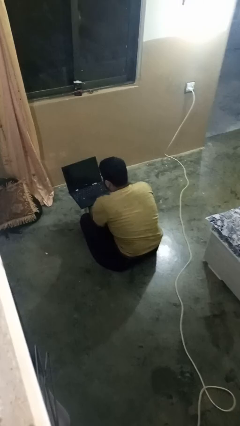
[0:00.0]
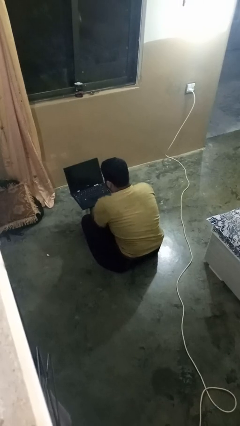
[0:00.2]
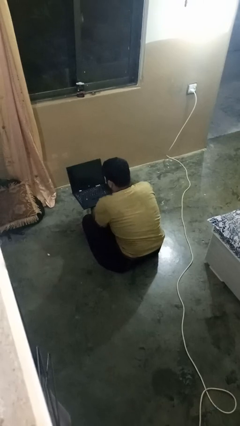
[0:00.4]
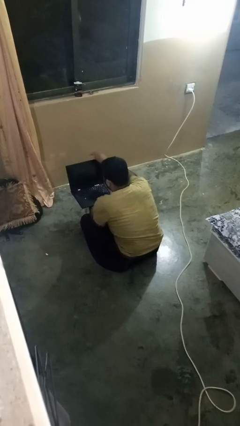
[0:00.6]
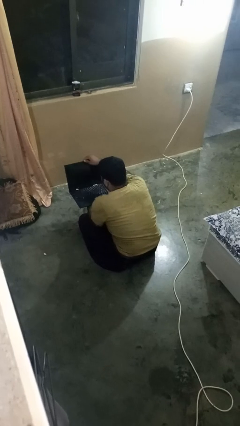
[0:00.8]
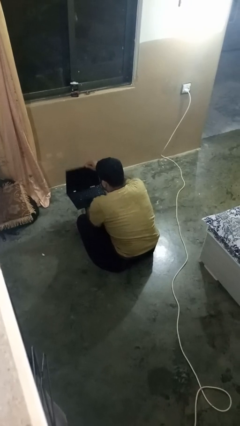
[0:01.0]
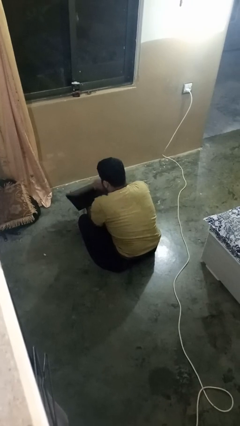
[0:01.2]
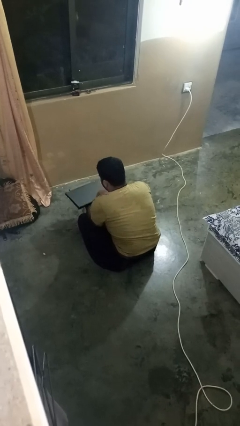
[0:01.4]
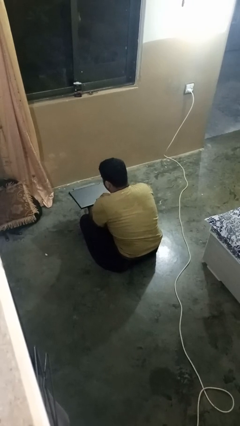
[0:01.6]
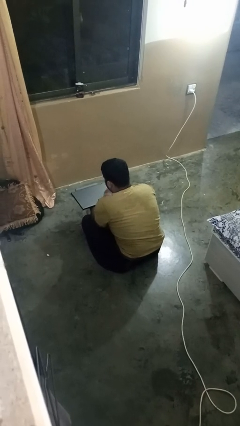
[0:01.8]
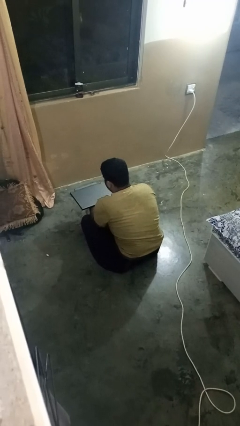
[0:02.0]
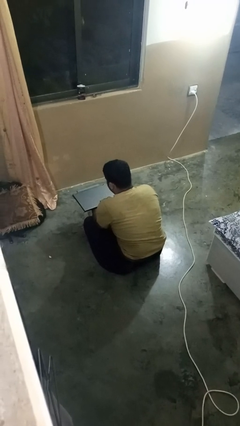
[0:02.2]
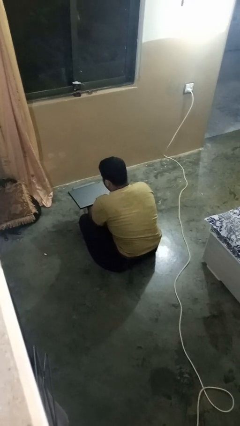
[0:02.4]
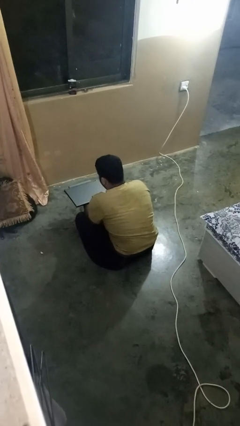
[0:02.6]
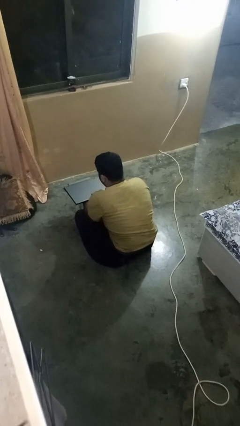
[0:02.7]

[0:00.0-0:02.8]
person closes laptop

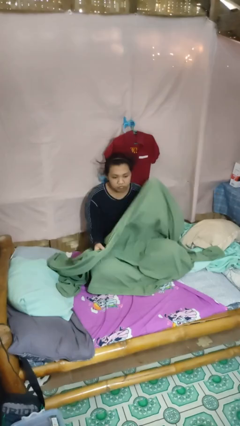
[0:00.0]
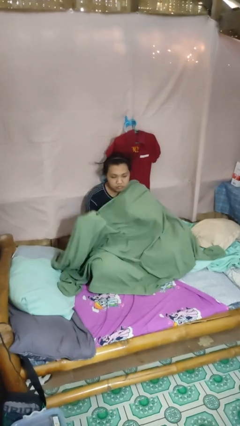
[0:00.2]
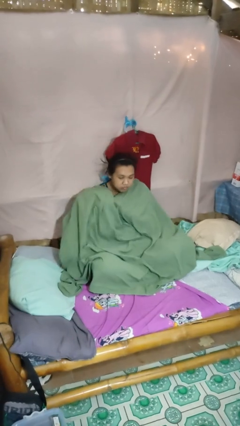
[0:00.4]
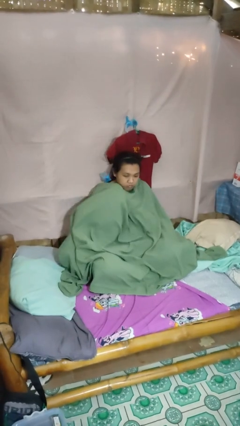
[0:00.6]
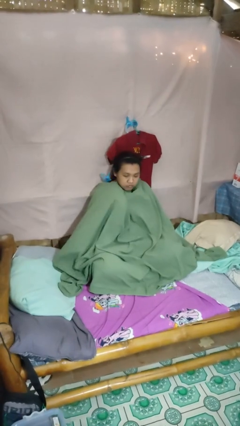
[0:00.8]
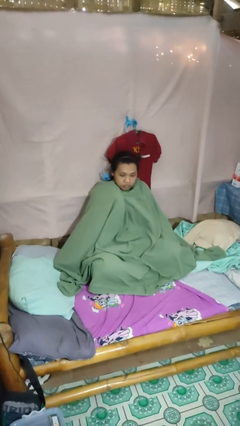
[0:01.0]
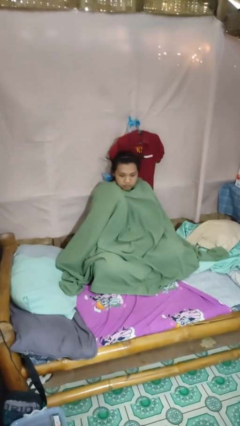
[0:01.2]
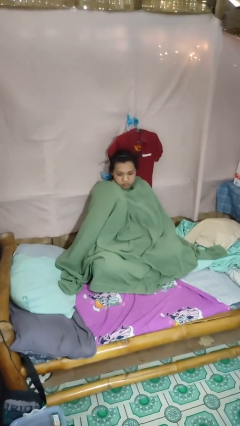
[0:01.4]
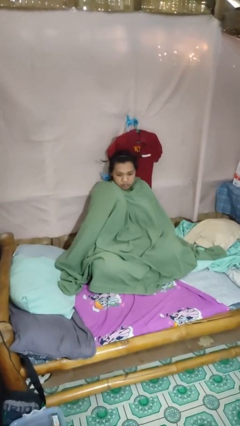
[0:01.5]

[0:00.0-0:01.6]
person covers with blanket

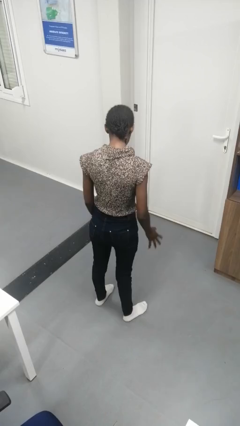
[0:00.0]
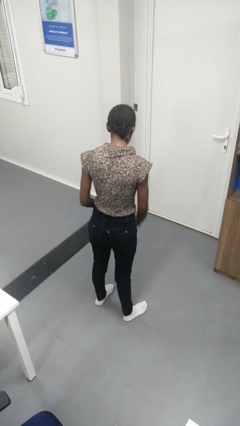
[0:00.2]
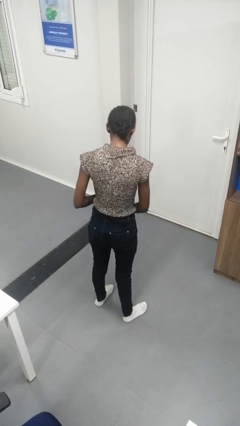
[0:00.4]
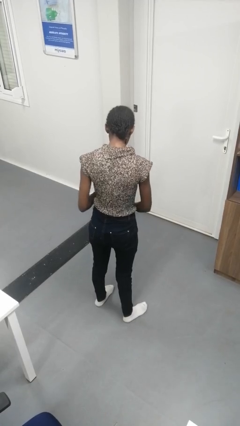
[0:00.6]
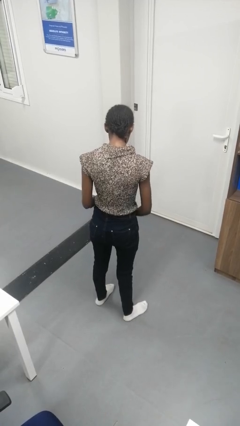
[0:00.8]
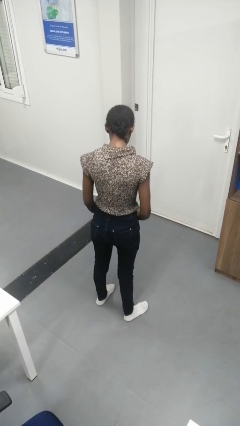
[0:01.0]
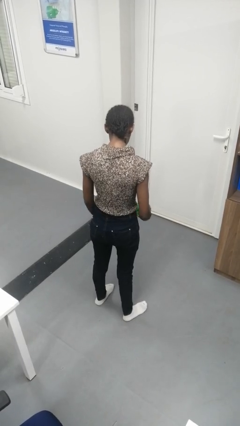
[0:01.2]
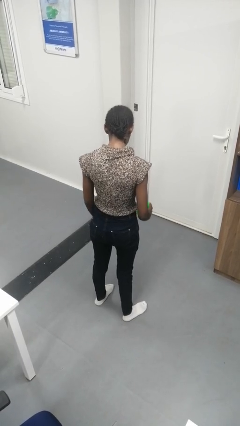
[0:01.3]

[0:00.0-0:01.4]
person bounces ball on floor

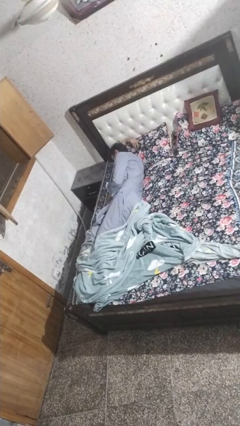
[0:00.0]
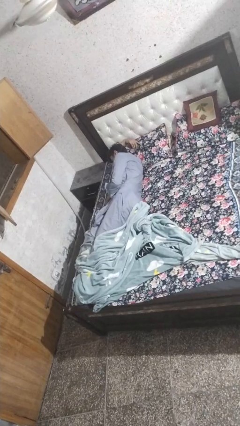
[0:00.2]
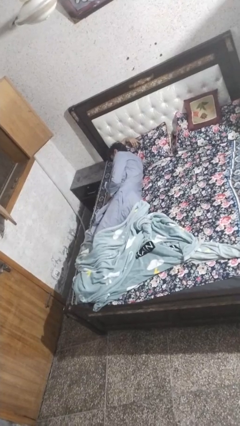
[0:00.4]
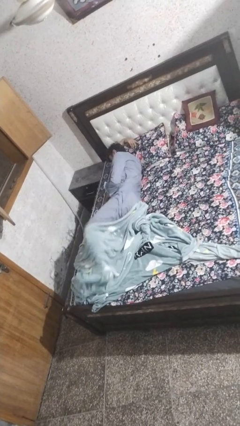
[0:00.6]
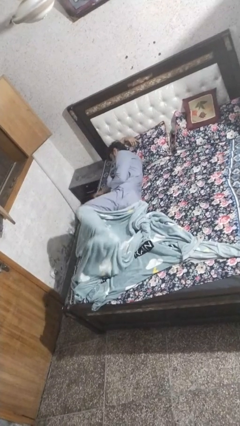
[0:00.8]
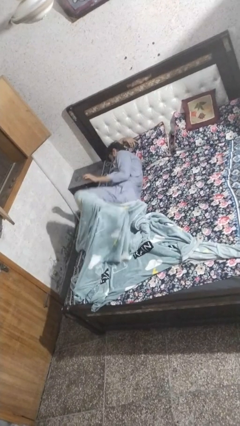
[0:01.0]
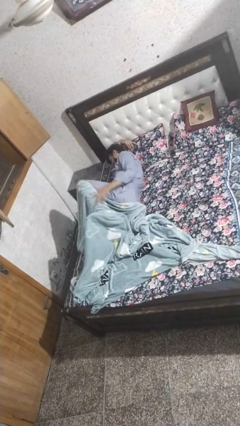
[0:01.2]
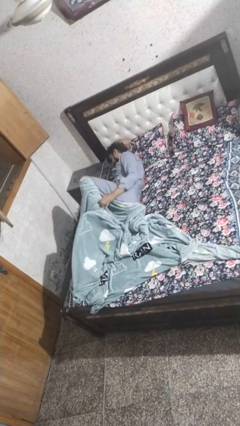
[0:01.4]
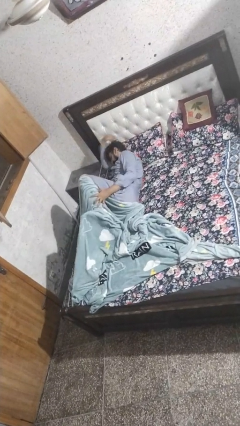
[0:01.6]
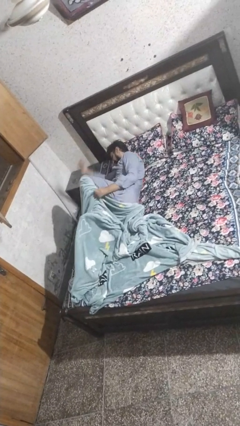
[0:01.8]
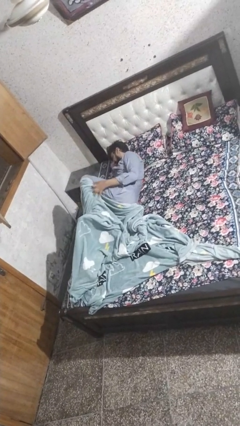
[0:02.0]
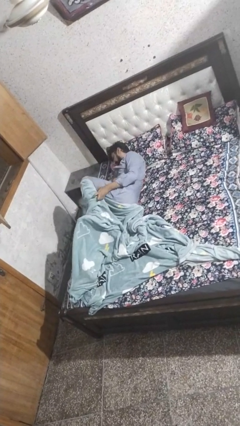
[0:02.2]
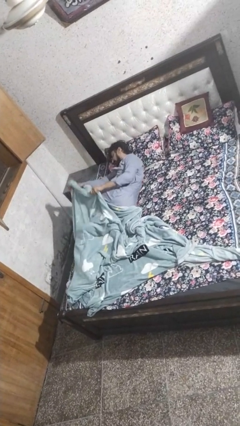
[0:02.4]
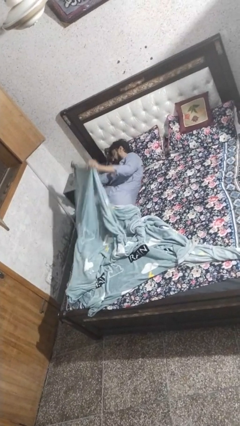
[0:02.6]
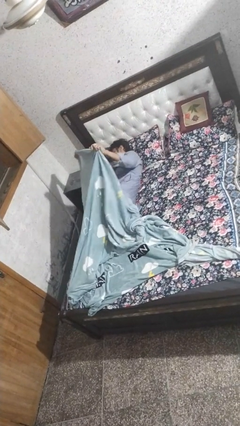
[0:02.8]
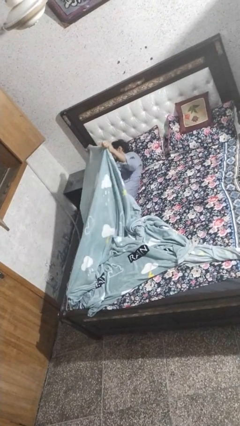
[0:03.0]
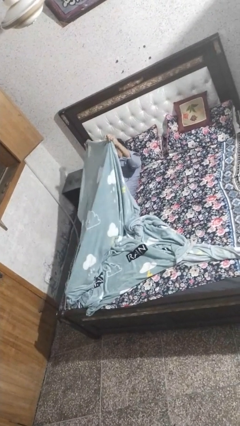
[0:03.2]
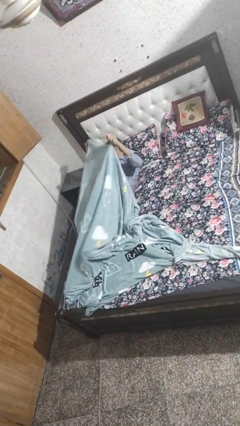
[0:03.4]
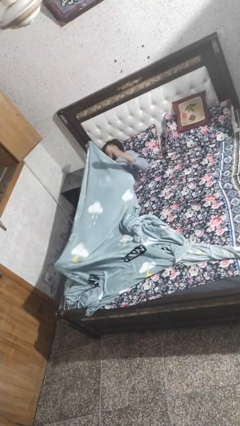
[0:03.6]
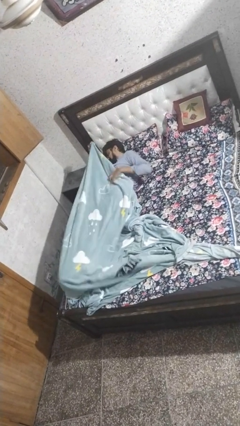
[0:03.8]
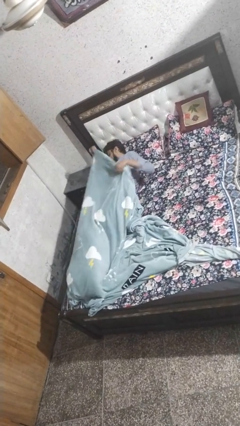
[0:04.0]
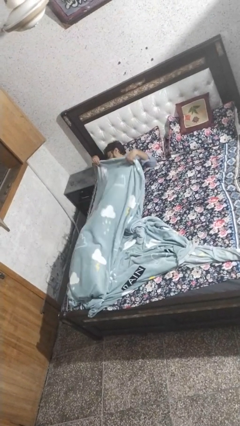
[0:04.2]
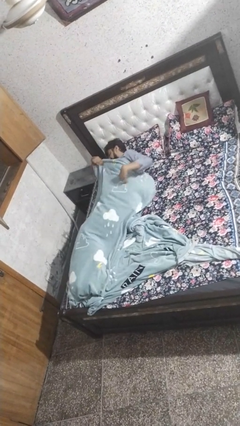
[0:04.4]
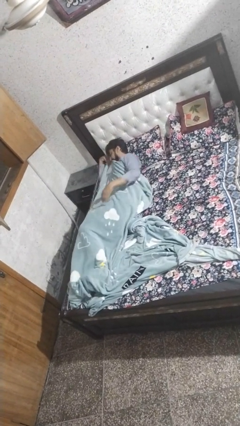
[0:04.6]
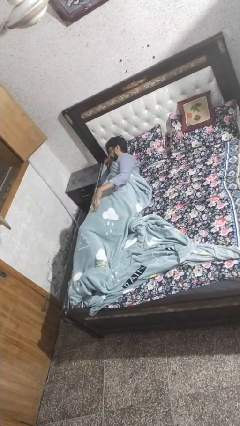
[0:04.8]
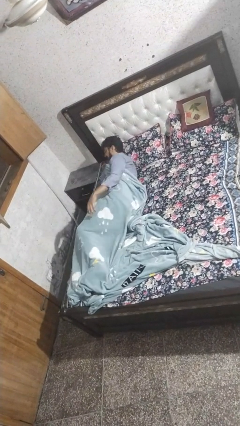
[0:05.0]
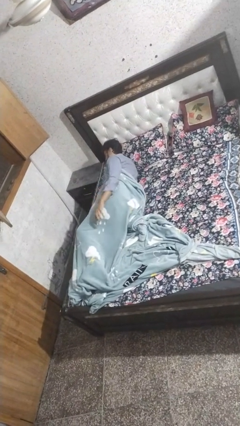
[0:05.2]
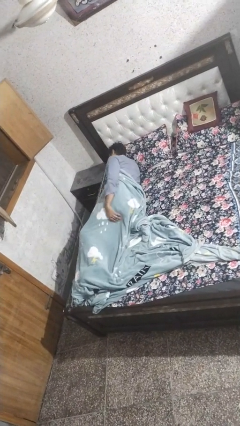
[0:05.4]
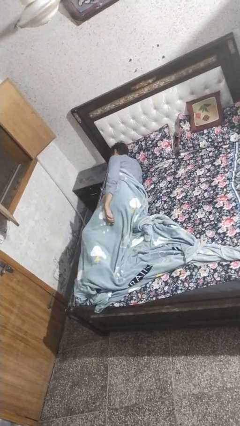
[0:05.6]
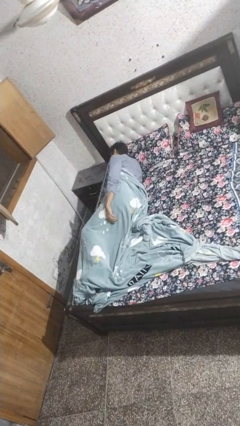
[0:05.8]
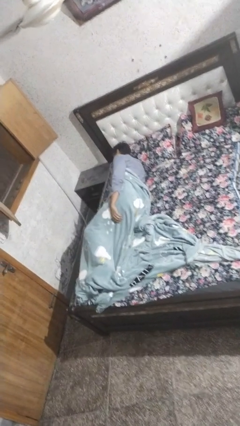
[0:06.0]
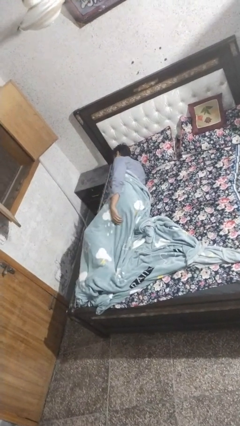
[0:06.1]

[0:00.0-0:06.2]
person covers with bedsheets

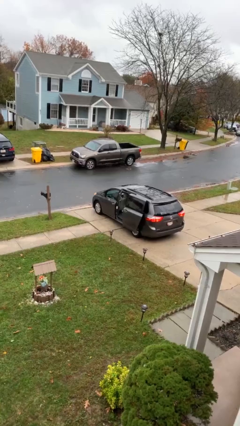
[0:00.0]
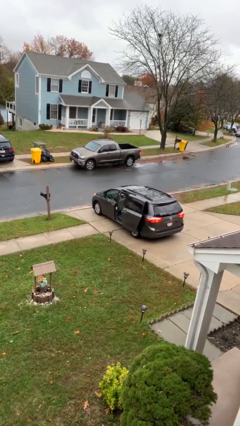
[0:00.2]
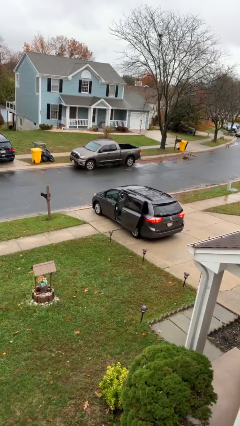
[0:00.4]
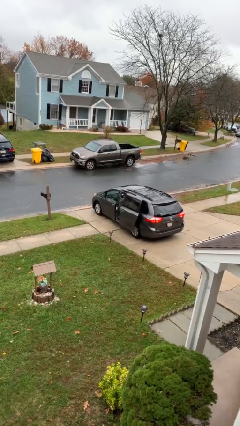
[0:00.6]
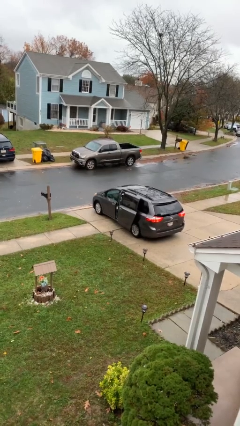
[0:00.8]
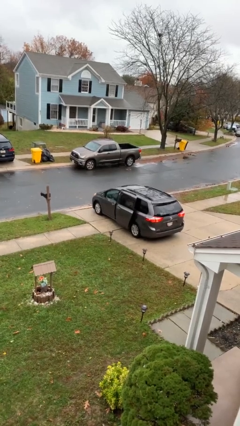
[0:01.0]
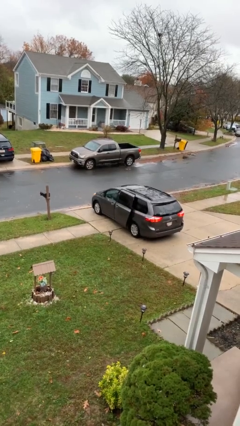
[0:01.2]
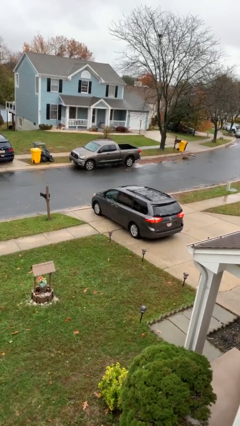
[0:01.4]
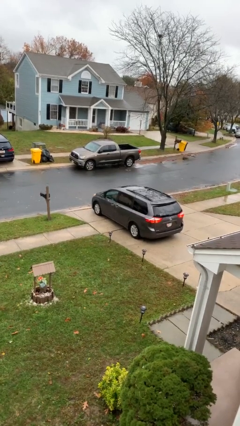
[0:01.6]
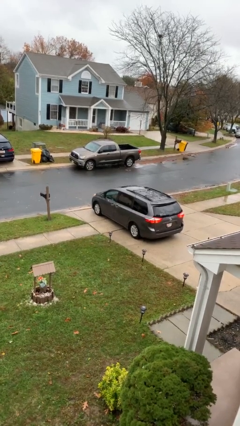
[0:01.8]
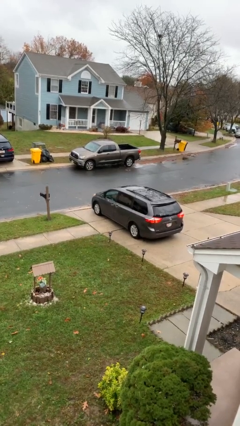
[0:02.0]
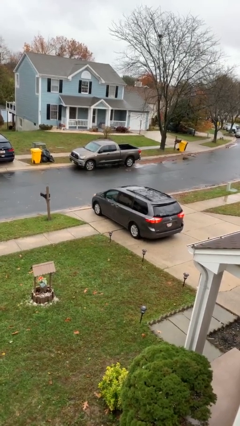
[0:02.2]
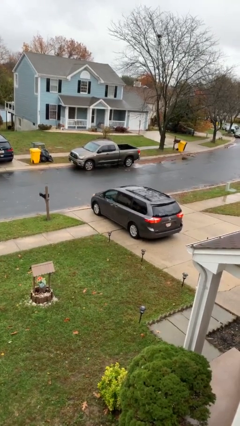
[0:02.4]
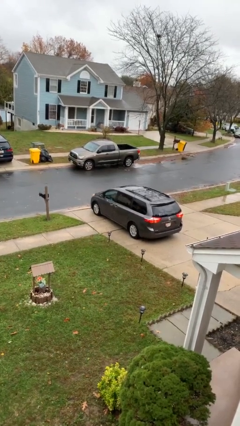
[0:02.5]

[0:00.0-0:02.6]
person closes car door

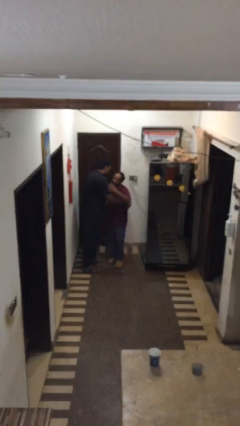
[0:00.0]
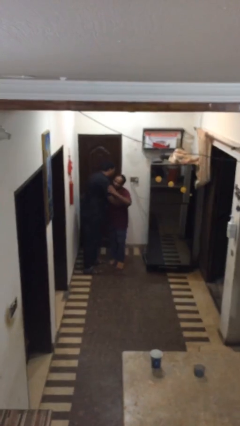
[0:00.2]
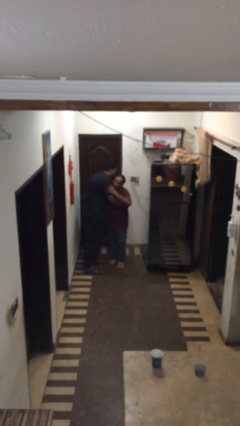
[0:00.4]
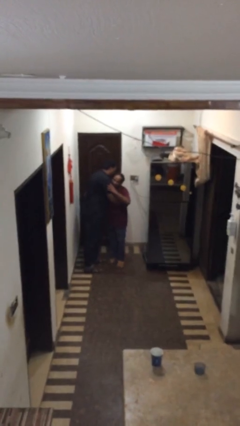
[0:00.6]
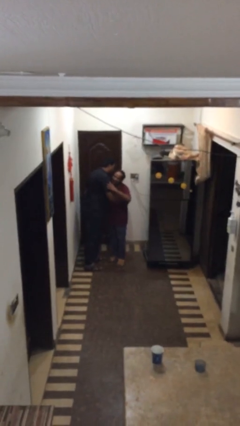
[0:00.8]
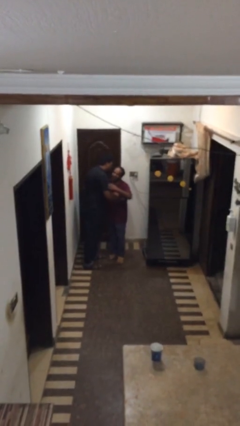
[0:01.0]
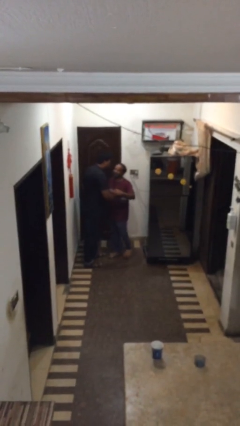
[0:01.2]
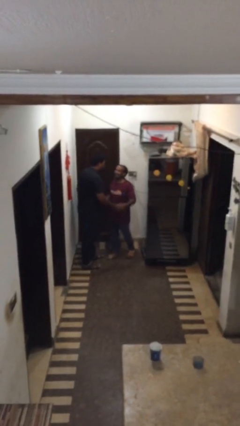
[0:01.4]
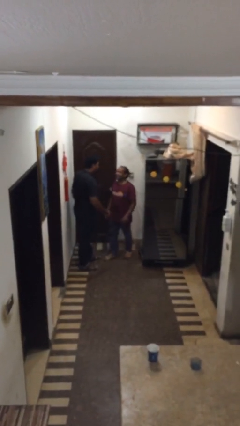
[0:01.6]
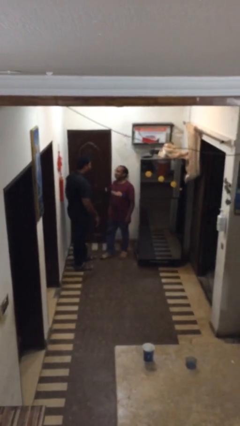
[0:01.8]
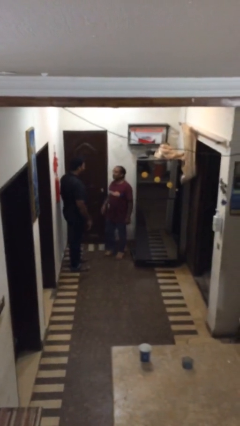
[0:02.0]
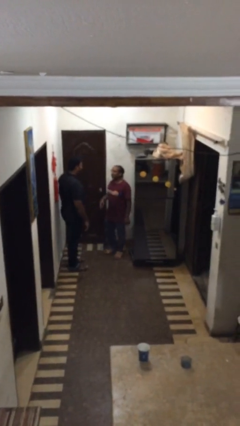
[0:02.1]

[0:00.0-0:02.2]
person embraces person

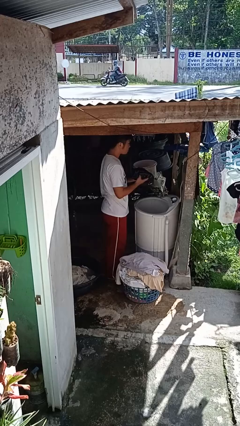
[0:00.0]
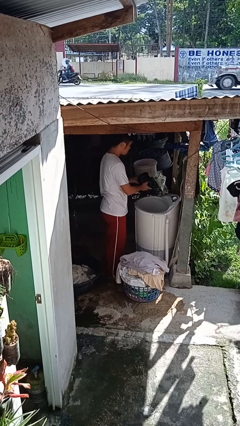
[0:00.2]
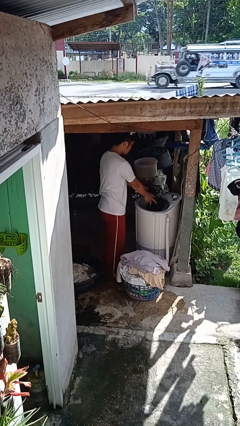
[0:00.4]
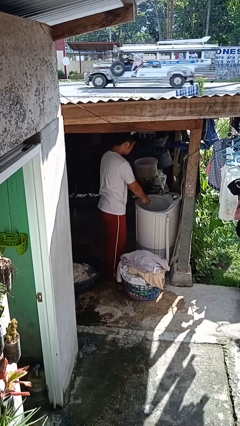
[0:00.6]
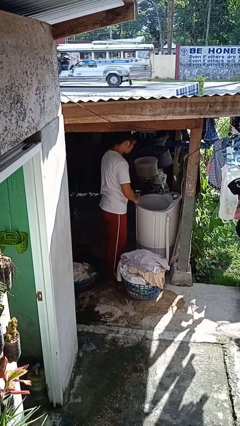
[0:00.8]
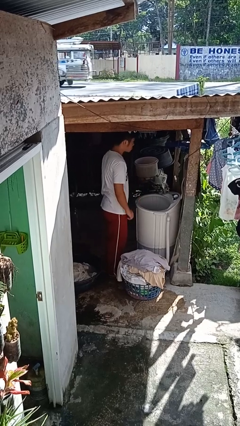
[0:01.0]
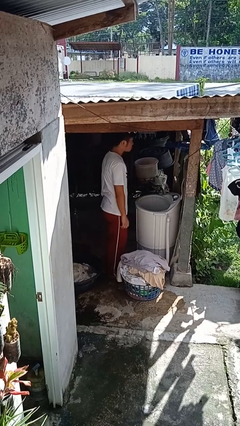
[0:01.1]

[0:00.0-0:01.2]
person loads clotheswasher
